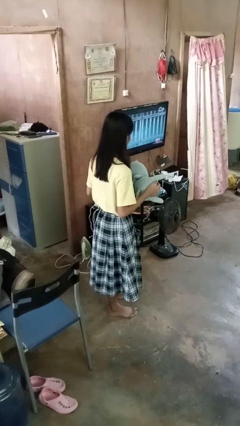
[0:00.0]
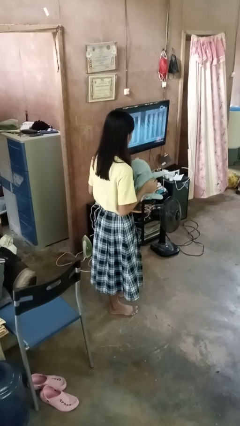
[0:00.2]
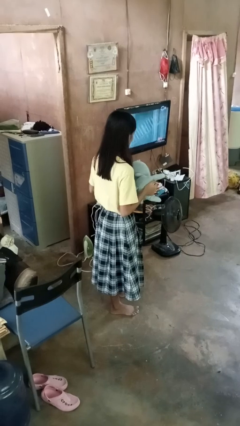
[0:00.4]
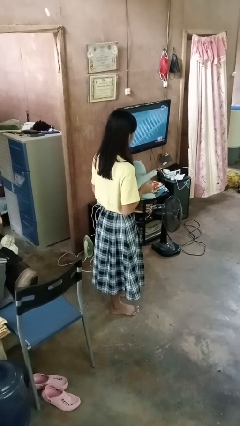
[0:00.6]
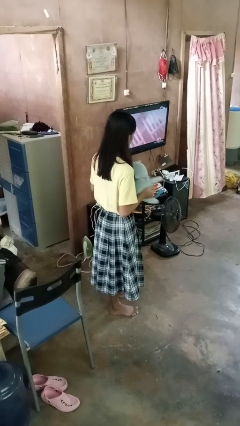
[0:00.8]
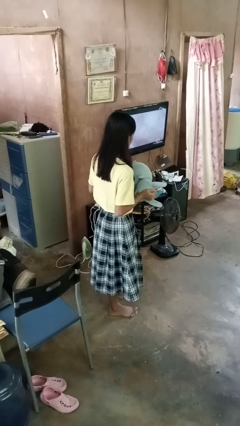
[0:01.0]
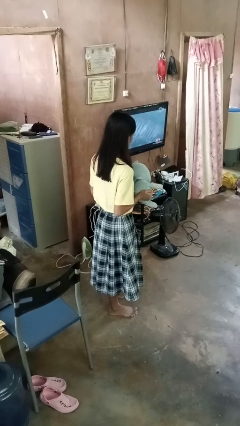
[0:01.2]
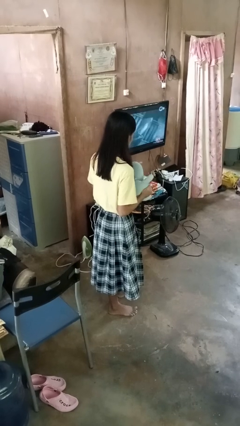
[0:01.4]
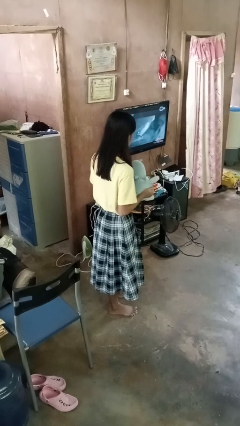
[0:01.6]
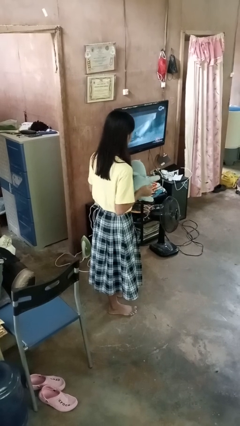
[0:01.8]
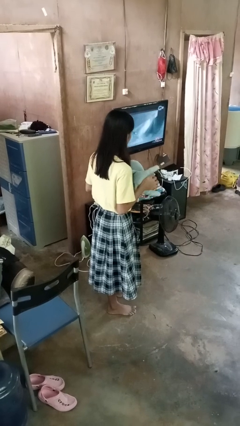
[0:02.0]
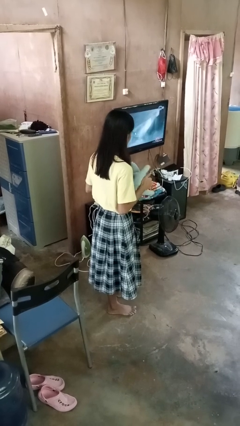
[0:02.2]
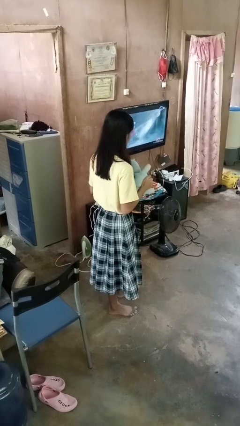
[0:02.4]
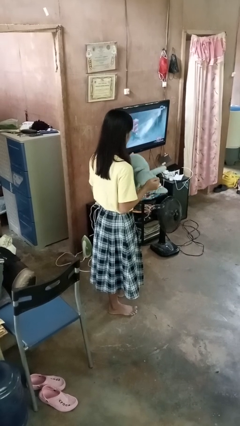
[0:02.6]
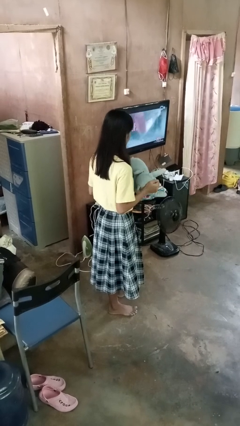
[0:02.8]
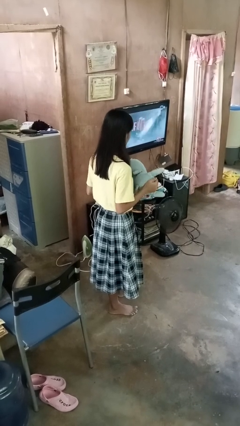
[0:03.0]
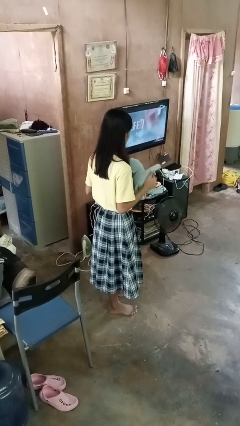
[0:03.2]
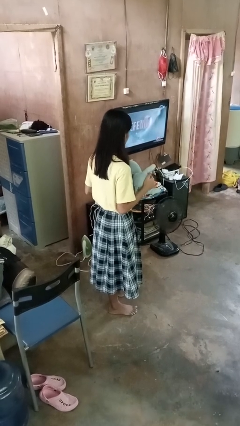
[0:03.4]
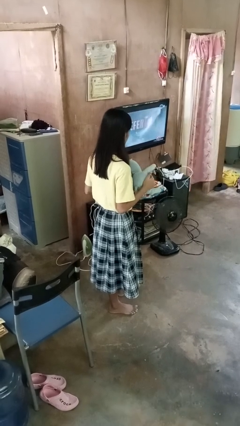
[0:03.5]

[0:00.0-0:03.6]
person squeezes object

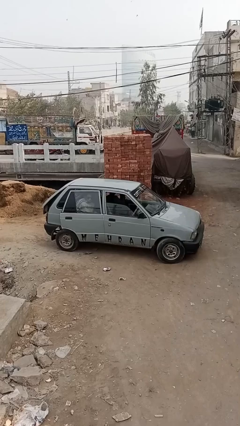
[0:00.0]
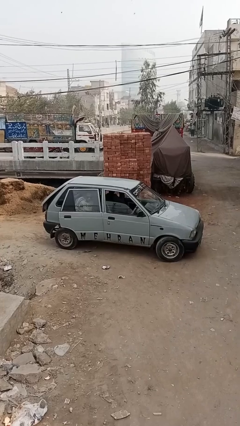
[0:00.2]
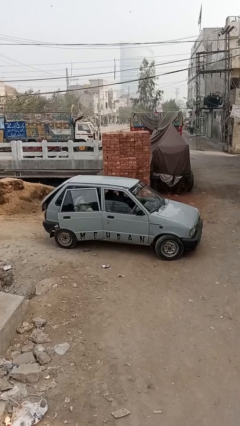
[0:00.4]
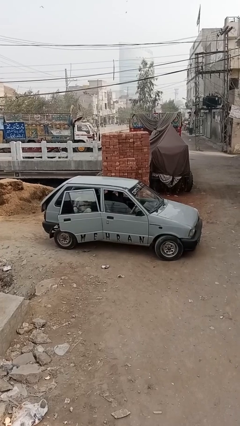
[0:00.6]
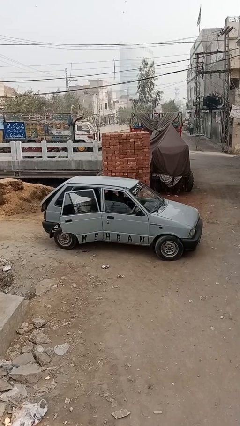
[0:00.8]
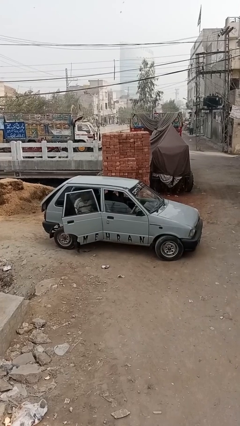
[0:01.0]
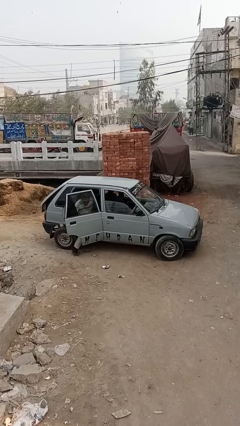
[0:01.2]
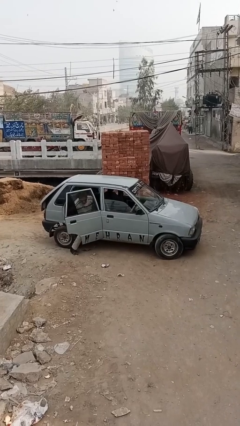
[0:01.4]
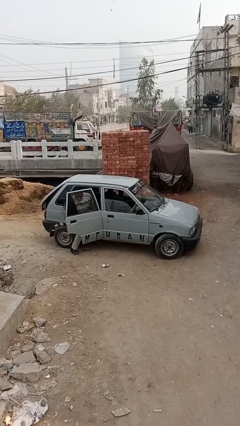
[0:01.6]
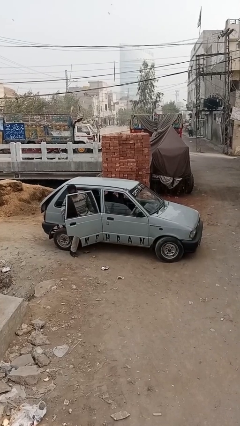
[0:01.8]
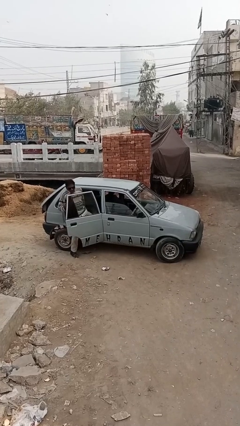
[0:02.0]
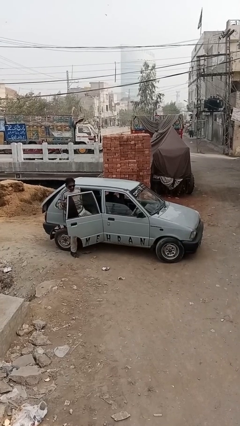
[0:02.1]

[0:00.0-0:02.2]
car drops off person

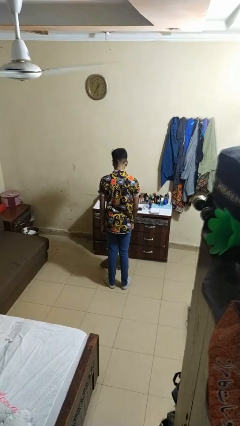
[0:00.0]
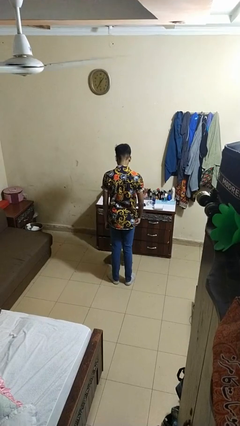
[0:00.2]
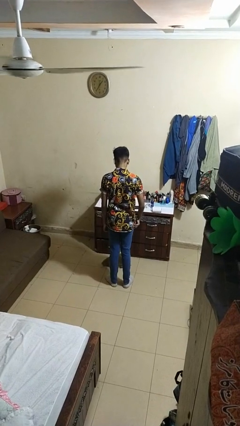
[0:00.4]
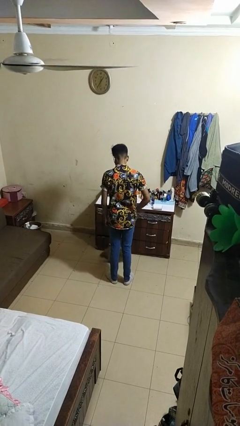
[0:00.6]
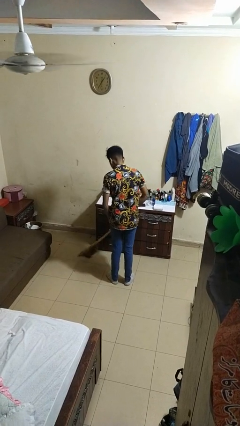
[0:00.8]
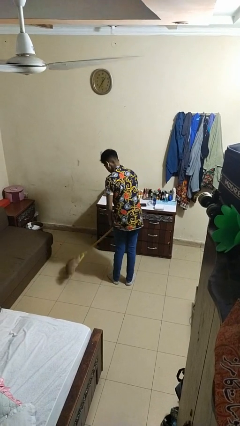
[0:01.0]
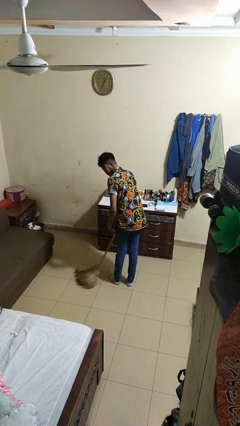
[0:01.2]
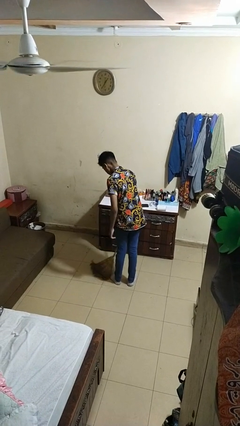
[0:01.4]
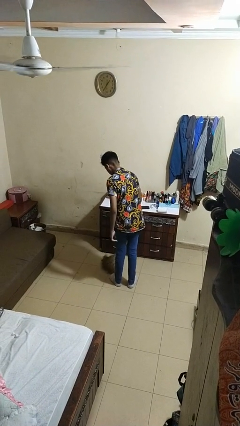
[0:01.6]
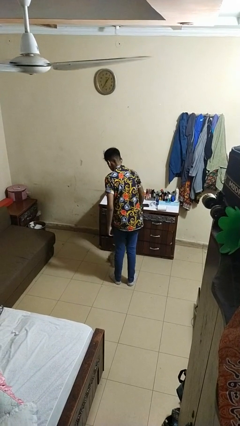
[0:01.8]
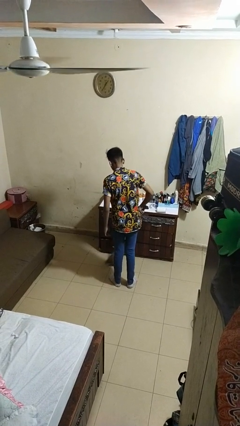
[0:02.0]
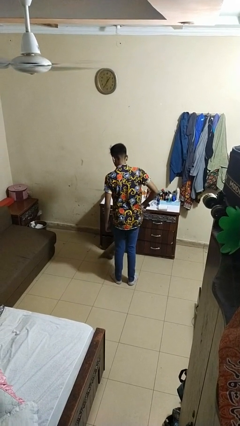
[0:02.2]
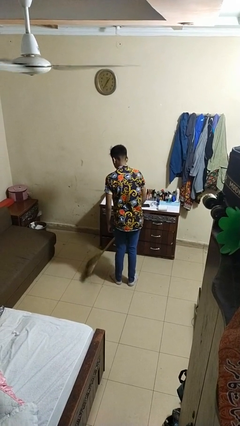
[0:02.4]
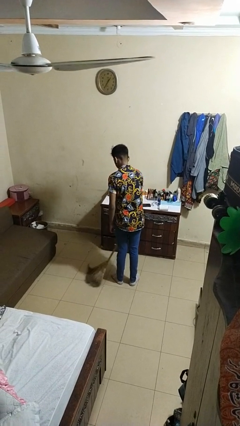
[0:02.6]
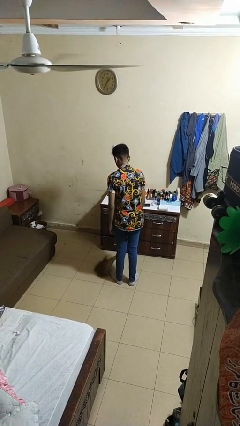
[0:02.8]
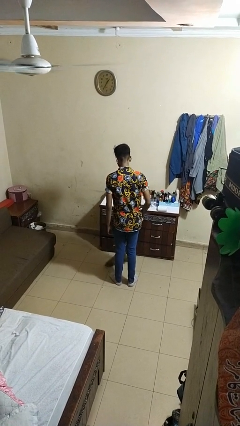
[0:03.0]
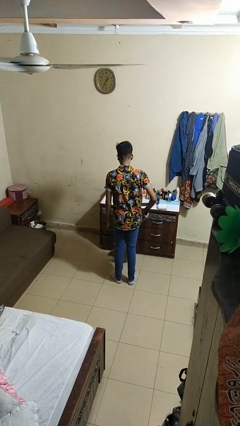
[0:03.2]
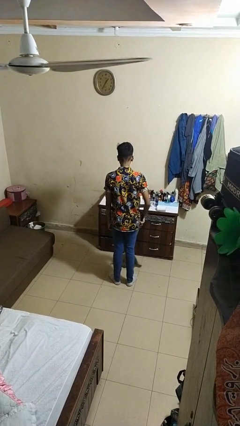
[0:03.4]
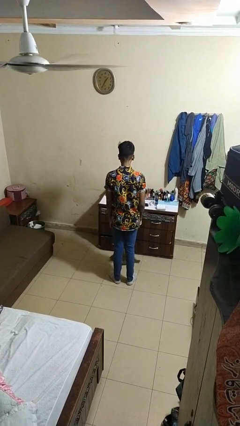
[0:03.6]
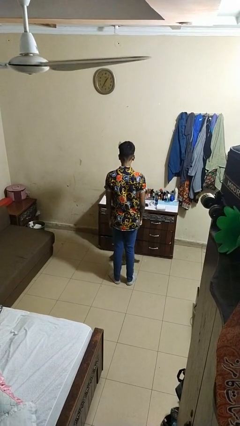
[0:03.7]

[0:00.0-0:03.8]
person sweeps floor

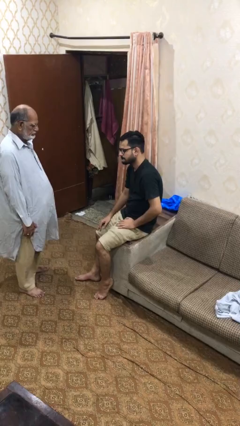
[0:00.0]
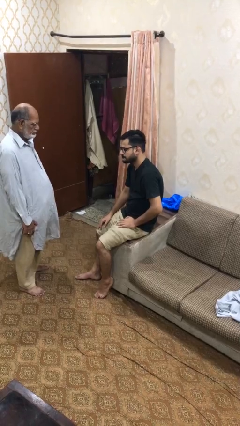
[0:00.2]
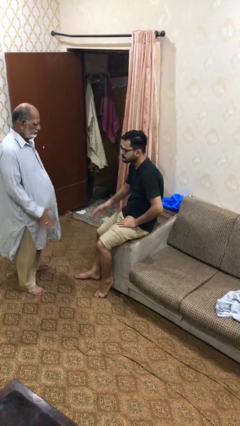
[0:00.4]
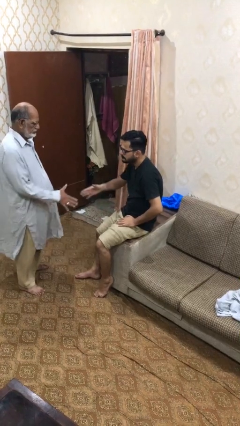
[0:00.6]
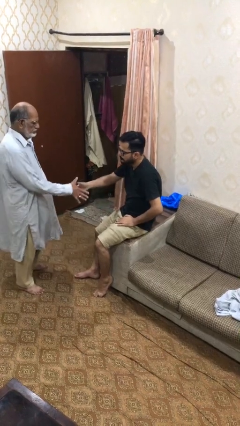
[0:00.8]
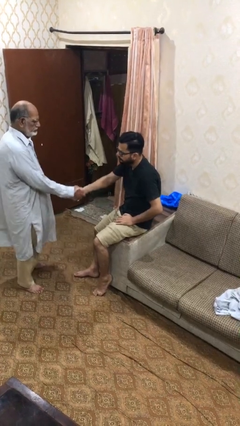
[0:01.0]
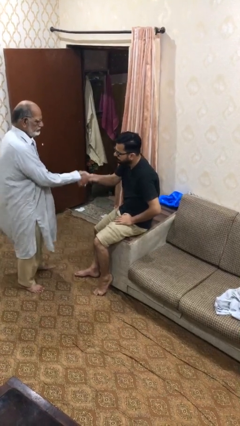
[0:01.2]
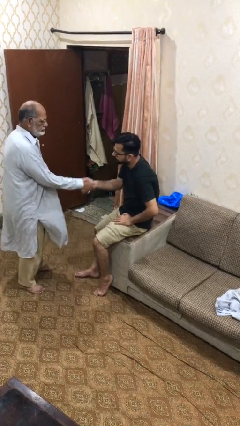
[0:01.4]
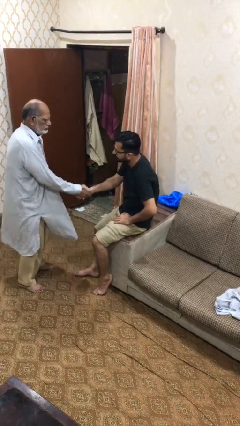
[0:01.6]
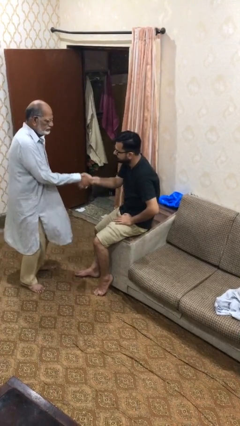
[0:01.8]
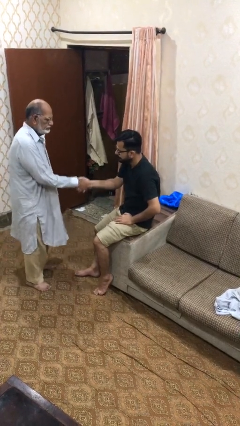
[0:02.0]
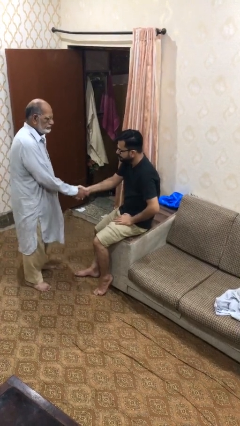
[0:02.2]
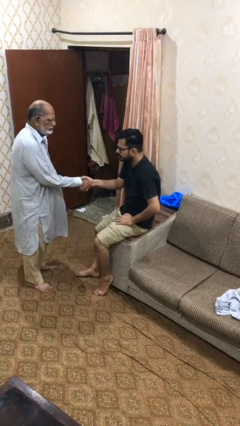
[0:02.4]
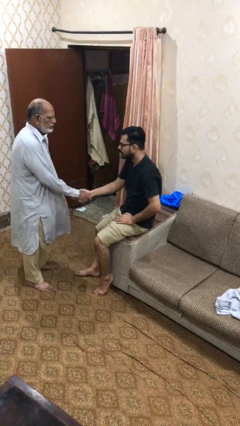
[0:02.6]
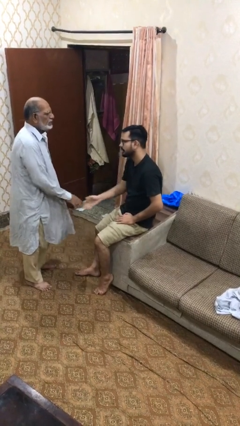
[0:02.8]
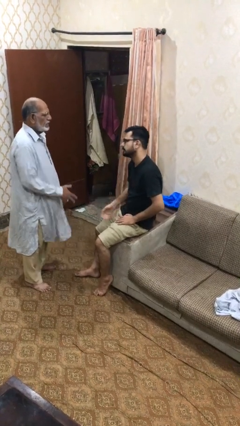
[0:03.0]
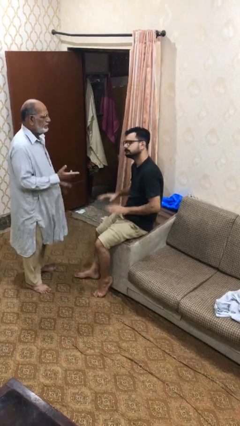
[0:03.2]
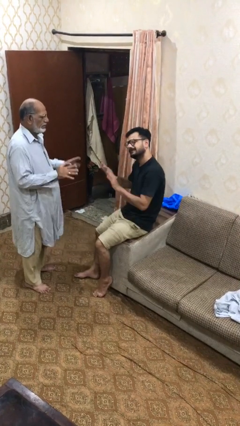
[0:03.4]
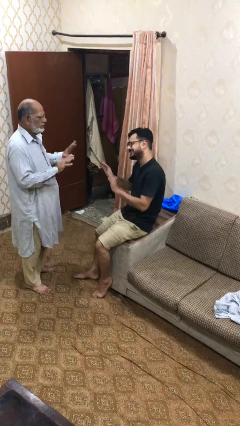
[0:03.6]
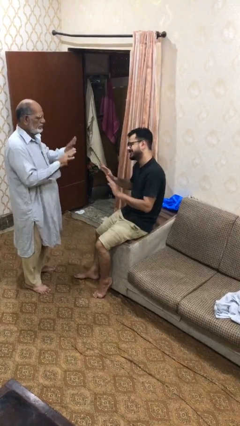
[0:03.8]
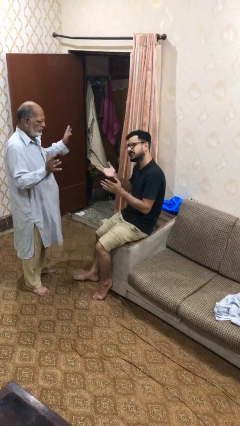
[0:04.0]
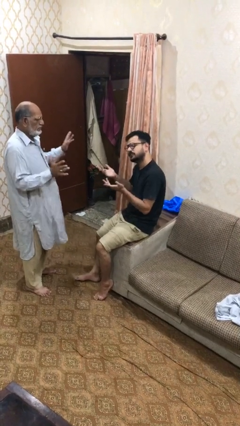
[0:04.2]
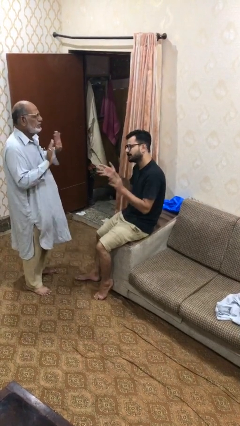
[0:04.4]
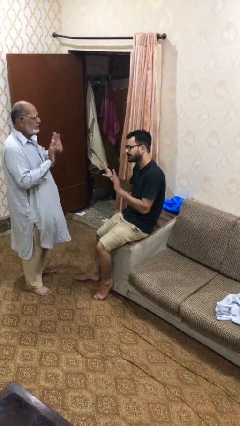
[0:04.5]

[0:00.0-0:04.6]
person shakes hand

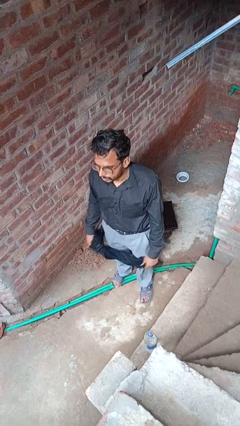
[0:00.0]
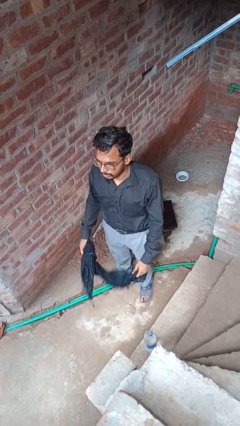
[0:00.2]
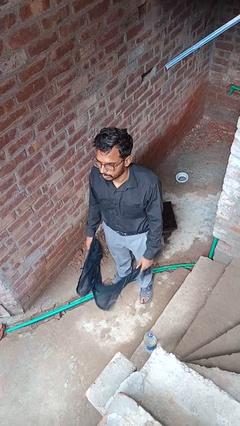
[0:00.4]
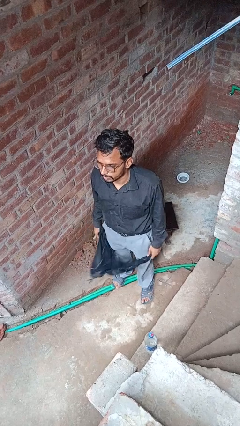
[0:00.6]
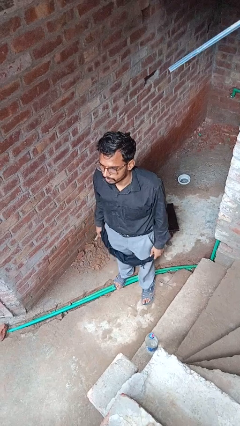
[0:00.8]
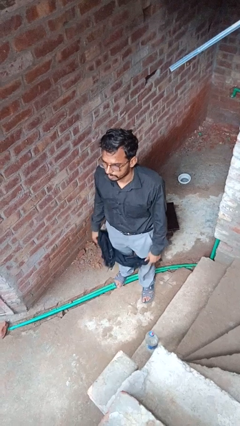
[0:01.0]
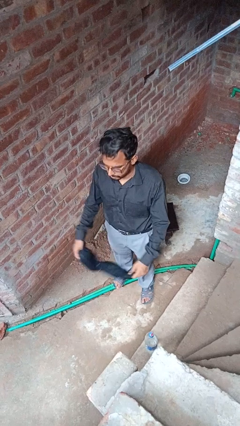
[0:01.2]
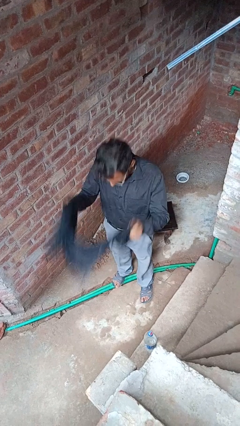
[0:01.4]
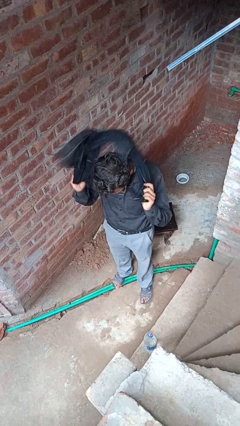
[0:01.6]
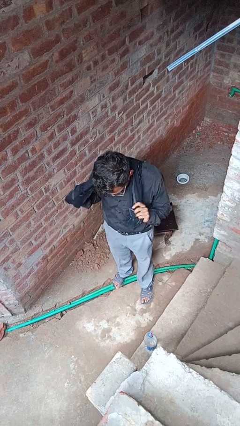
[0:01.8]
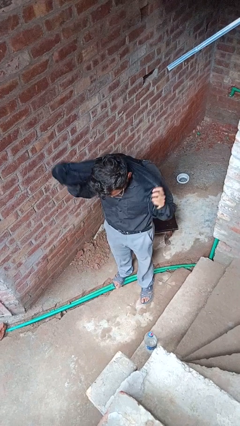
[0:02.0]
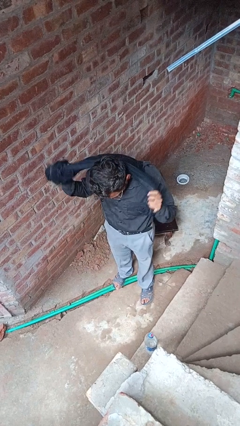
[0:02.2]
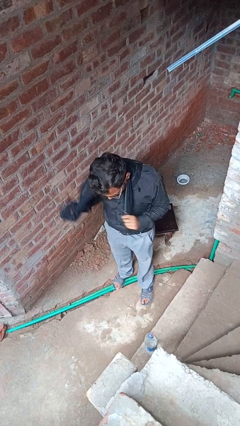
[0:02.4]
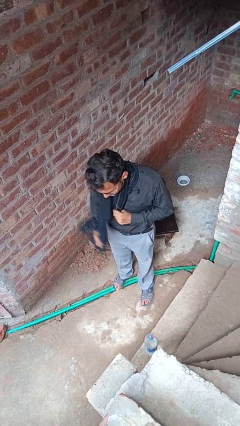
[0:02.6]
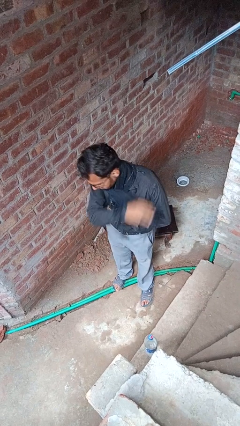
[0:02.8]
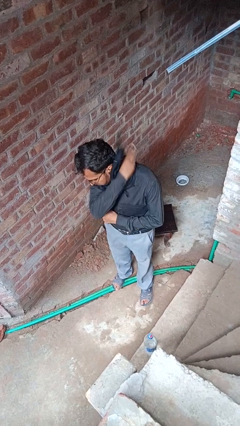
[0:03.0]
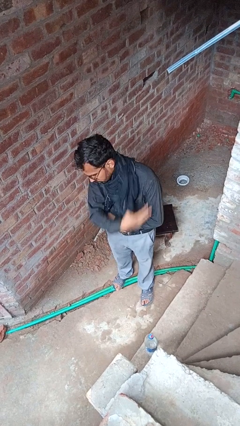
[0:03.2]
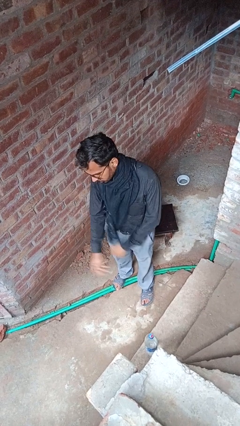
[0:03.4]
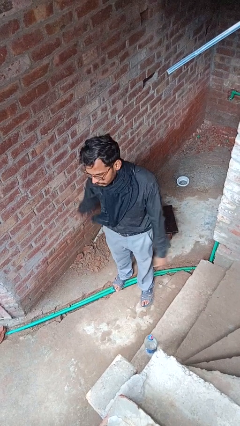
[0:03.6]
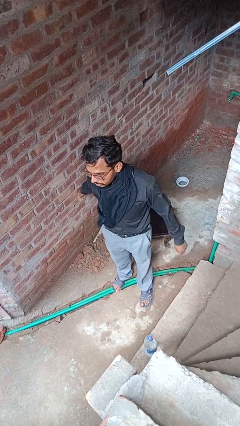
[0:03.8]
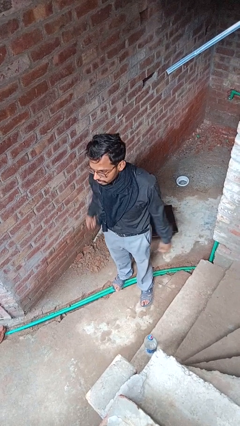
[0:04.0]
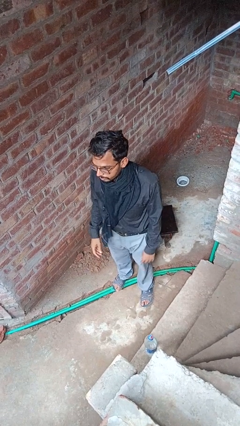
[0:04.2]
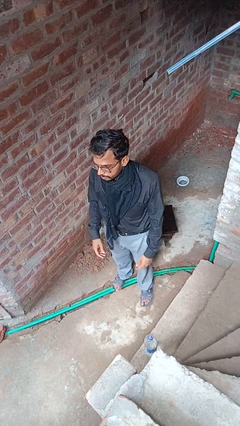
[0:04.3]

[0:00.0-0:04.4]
person puts on scarf
